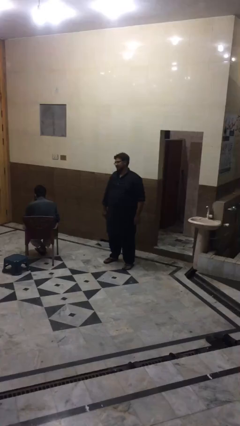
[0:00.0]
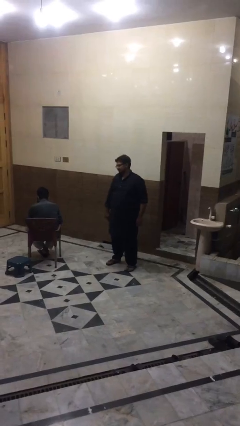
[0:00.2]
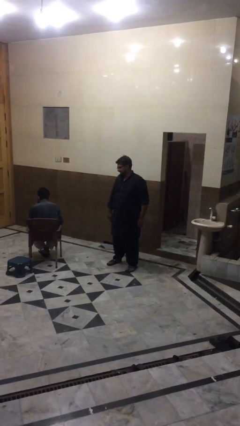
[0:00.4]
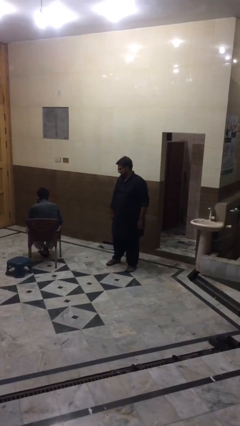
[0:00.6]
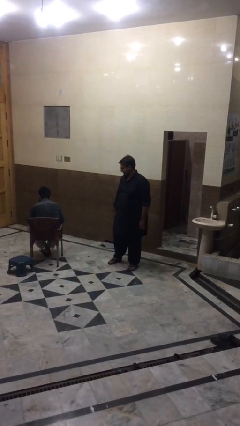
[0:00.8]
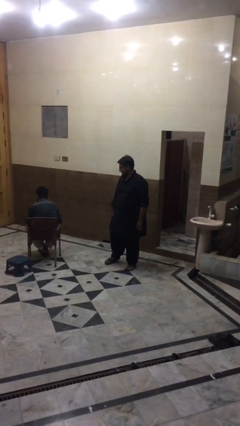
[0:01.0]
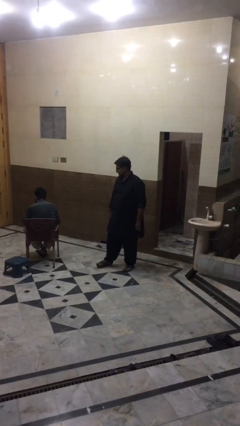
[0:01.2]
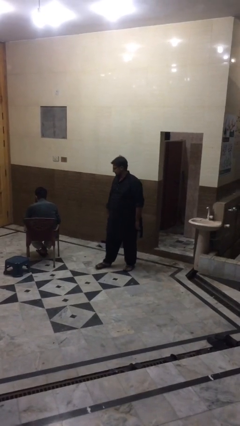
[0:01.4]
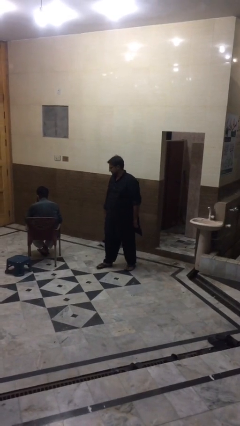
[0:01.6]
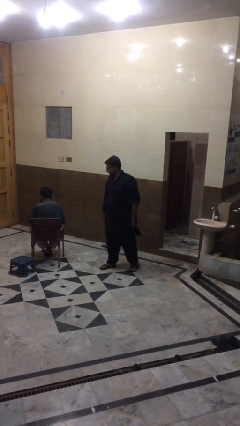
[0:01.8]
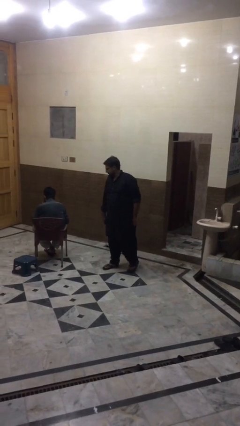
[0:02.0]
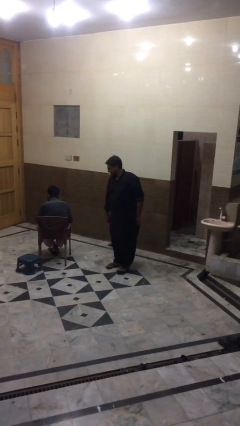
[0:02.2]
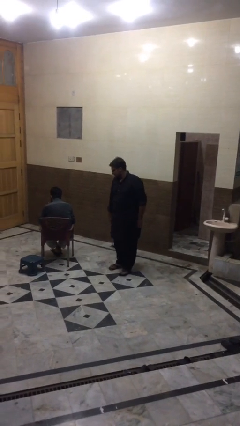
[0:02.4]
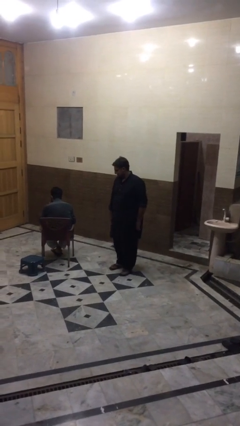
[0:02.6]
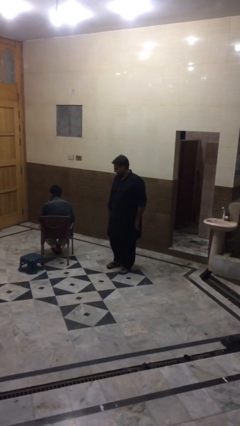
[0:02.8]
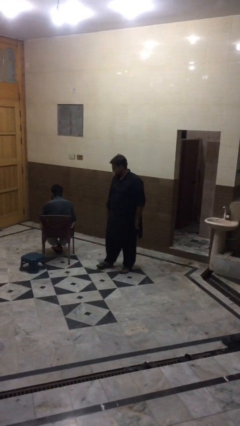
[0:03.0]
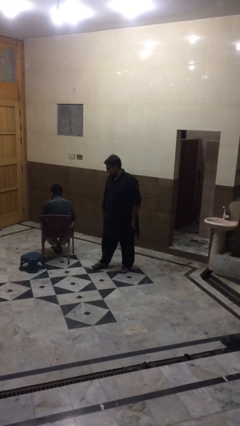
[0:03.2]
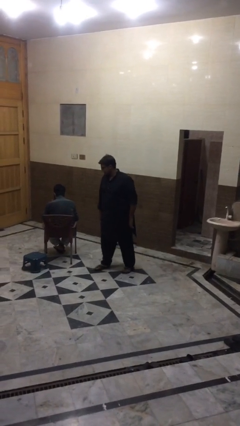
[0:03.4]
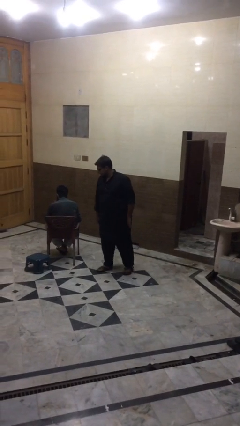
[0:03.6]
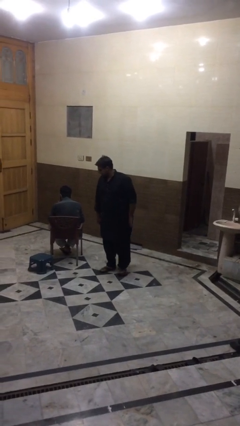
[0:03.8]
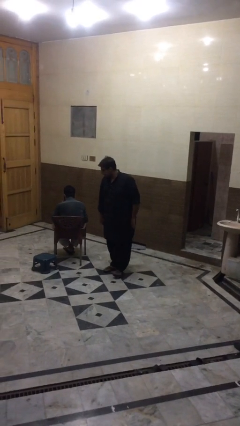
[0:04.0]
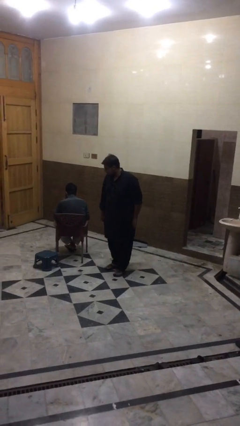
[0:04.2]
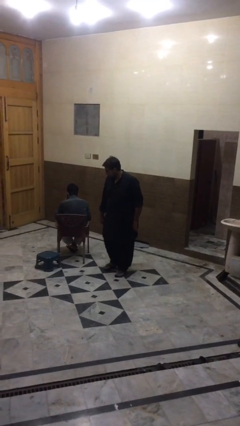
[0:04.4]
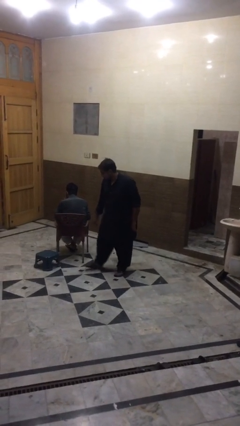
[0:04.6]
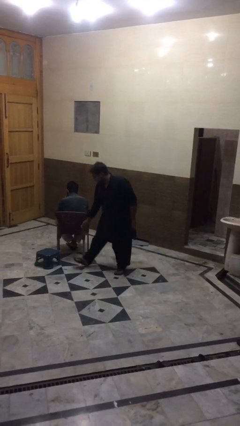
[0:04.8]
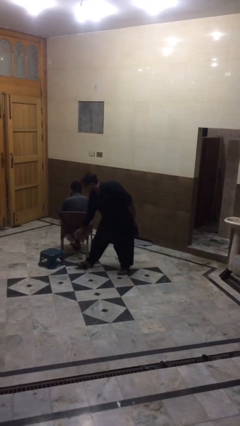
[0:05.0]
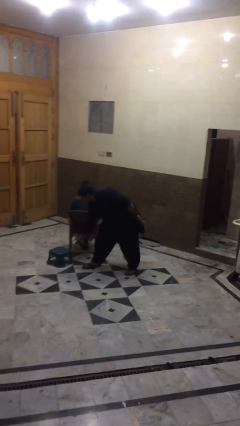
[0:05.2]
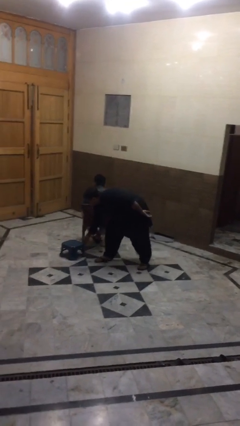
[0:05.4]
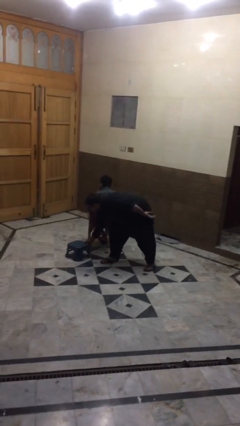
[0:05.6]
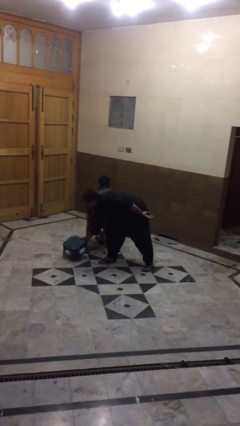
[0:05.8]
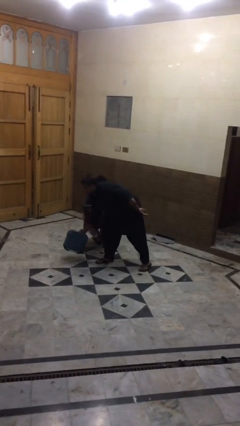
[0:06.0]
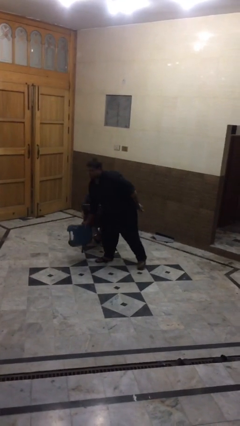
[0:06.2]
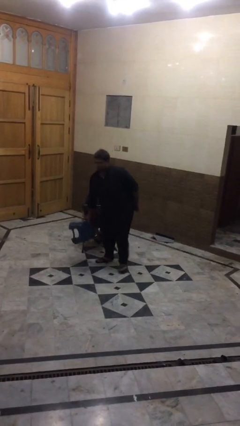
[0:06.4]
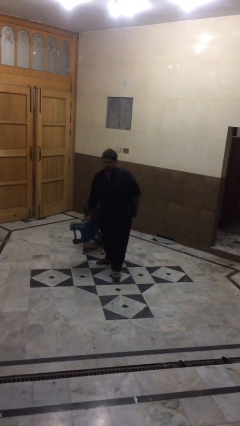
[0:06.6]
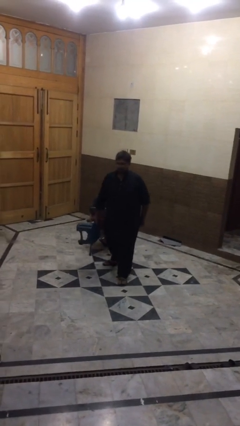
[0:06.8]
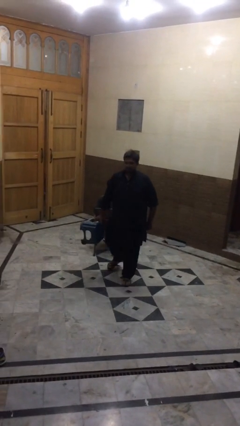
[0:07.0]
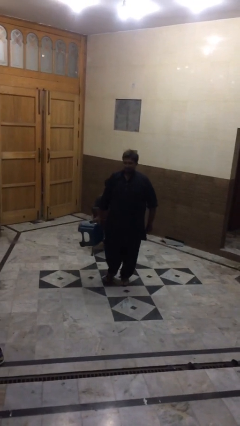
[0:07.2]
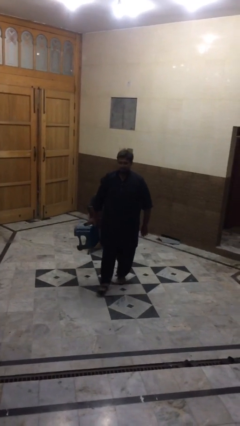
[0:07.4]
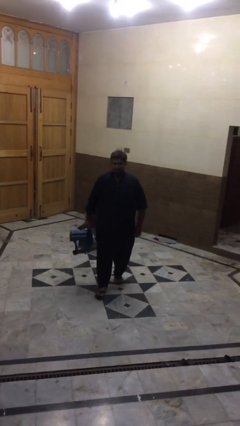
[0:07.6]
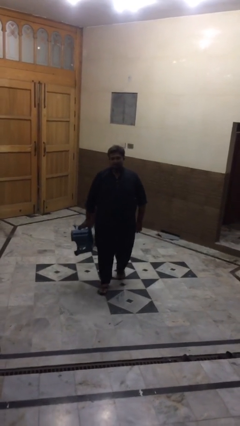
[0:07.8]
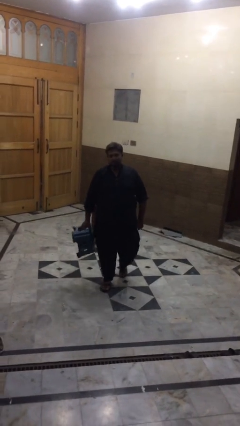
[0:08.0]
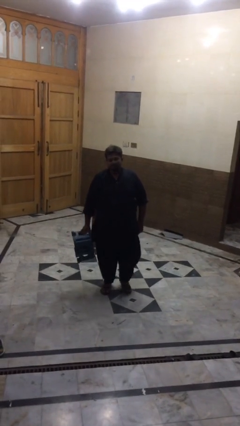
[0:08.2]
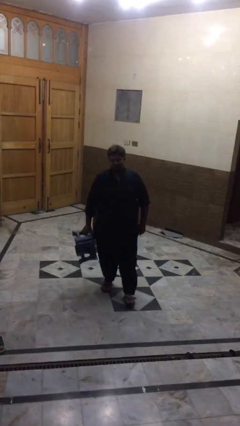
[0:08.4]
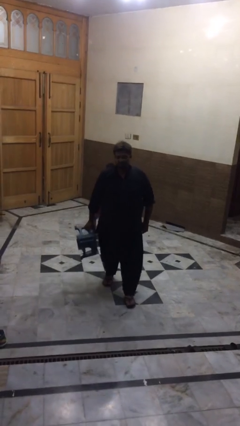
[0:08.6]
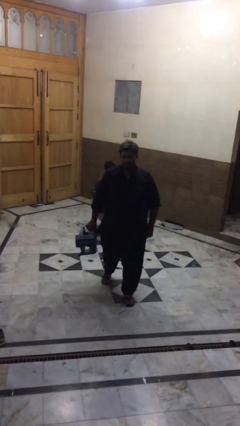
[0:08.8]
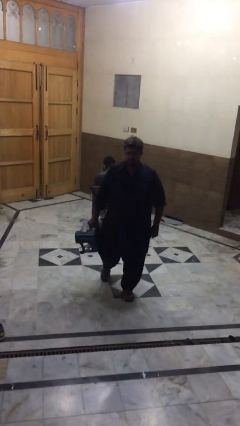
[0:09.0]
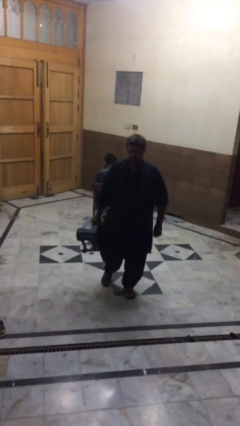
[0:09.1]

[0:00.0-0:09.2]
person steals object from person

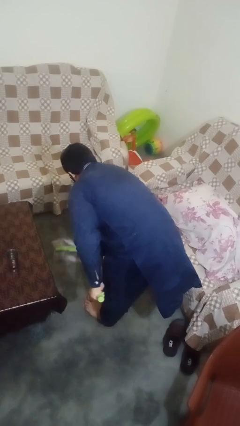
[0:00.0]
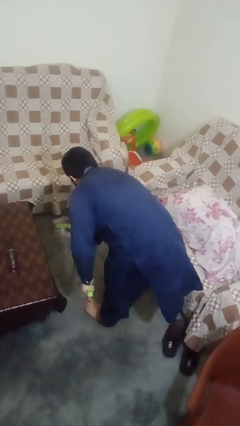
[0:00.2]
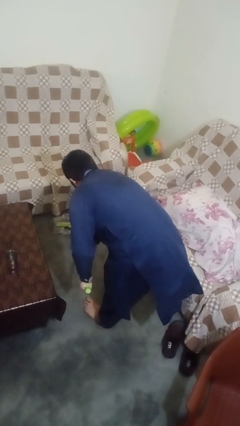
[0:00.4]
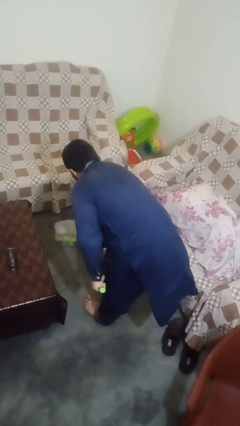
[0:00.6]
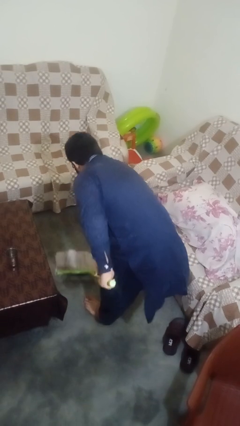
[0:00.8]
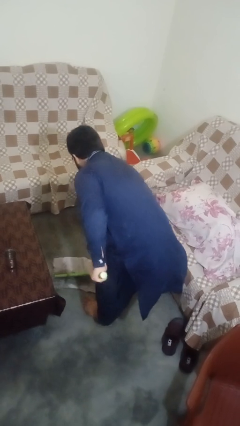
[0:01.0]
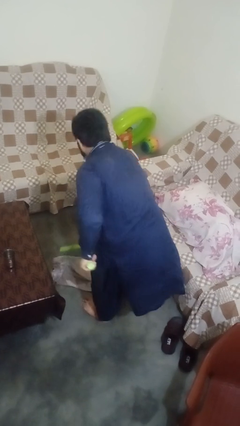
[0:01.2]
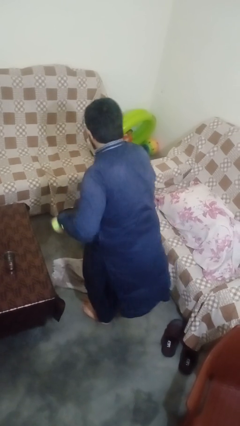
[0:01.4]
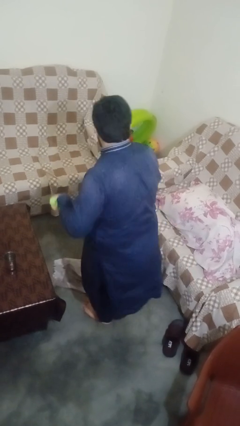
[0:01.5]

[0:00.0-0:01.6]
person mops

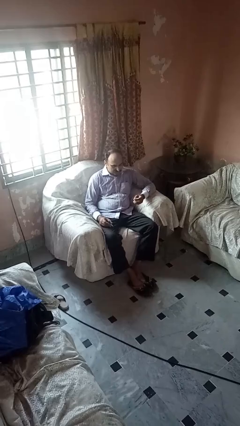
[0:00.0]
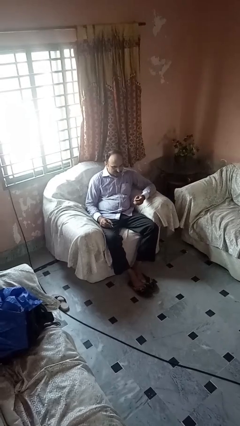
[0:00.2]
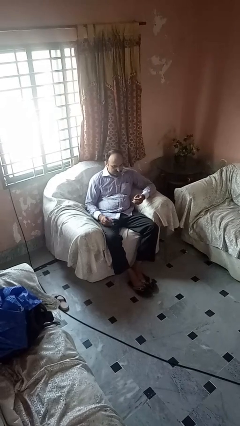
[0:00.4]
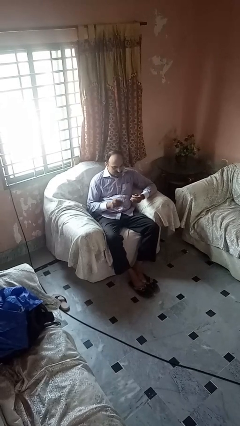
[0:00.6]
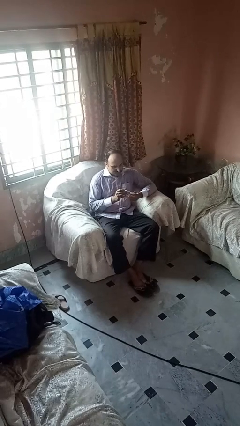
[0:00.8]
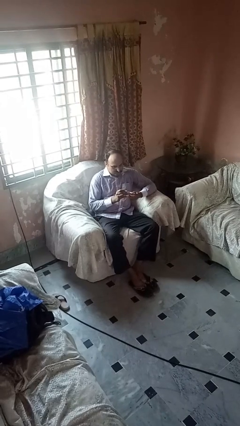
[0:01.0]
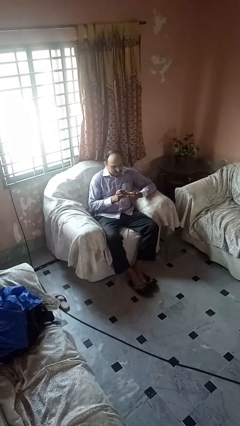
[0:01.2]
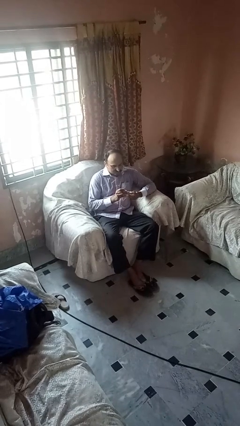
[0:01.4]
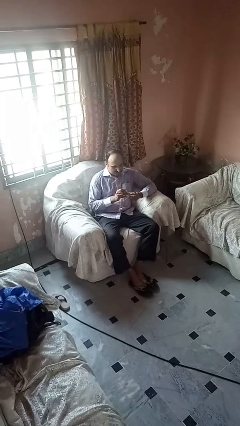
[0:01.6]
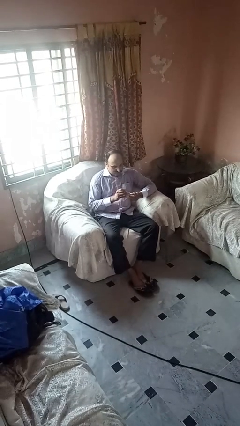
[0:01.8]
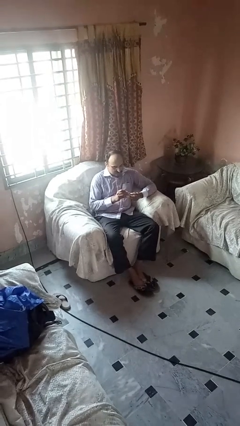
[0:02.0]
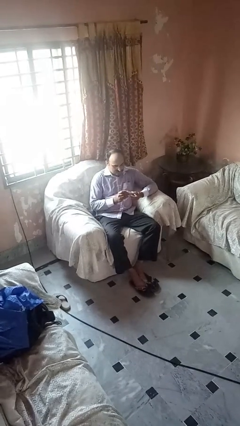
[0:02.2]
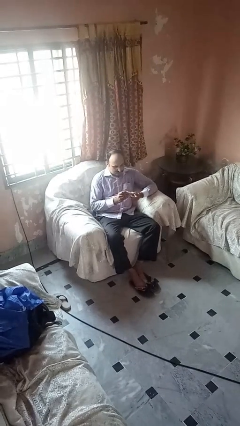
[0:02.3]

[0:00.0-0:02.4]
person clips fingernails

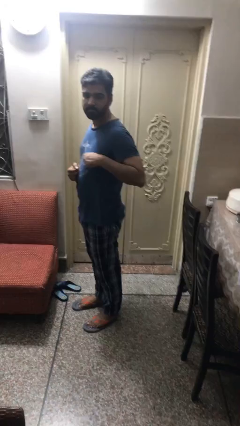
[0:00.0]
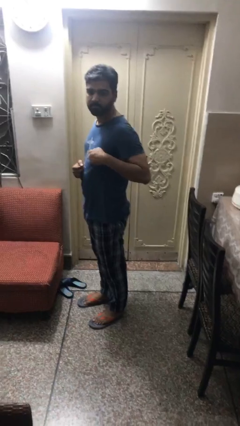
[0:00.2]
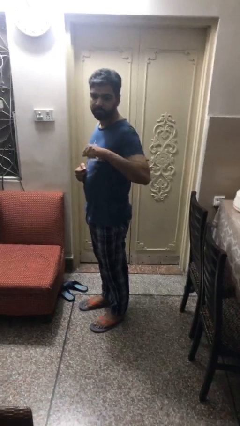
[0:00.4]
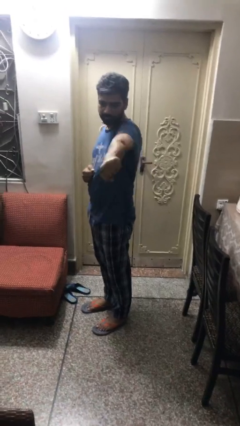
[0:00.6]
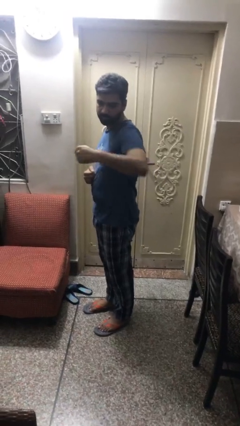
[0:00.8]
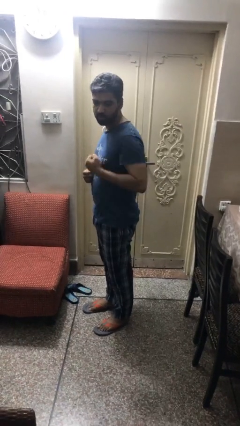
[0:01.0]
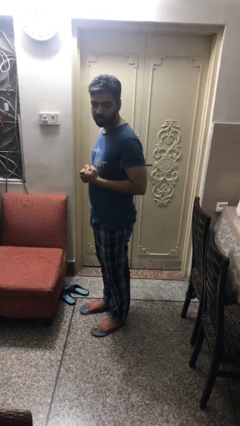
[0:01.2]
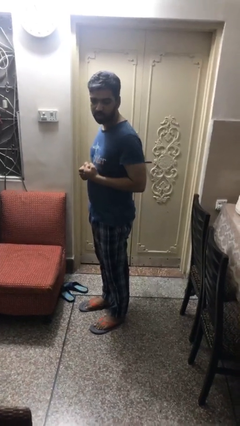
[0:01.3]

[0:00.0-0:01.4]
person karate chop

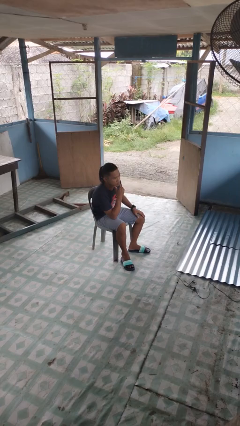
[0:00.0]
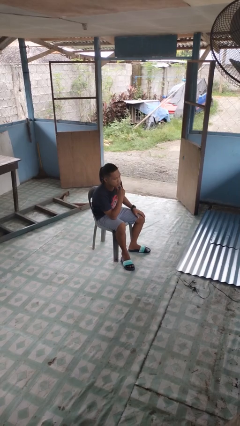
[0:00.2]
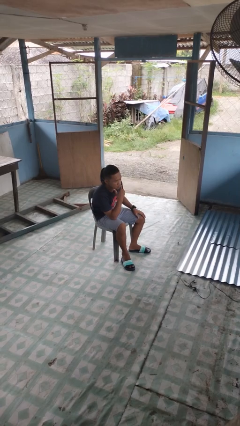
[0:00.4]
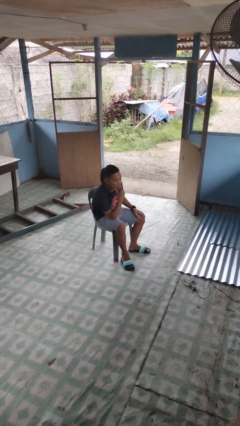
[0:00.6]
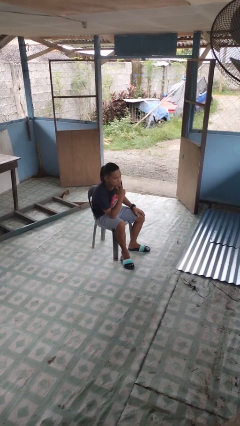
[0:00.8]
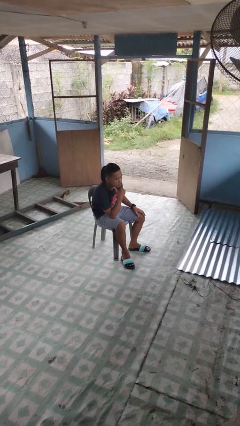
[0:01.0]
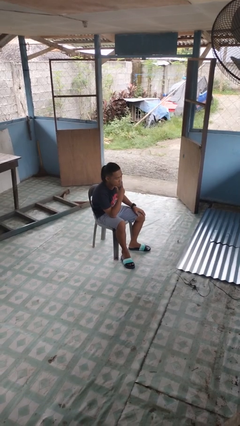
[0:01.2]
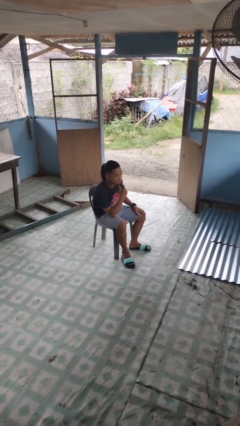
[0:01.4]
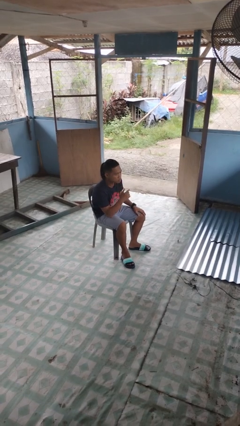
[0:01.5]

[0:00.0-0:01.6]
person strokes chin

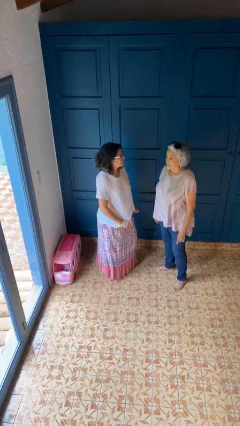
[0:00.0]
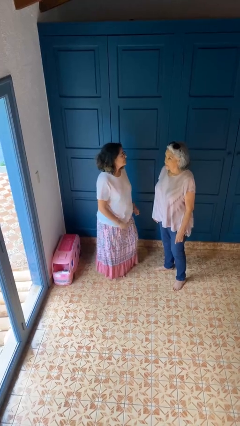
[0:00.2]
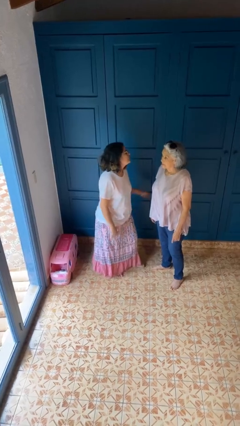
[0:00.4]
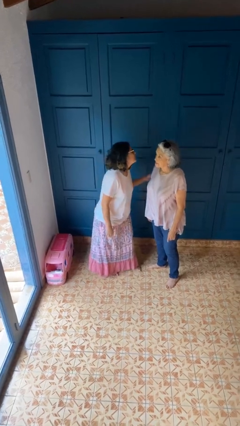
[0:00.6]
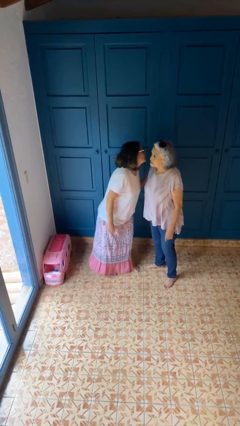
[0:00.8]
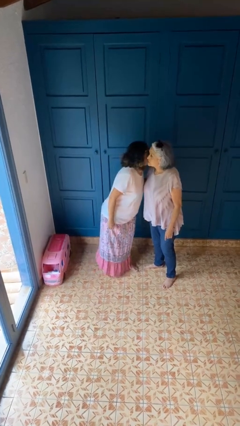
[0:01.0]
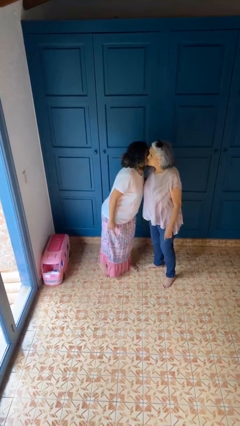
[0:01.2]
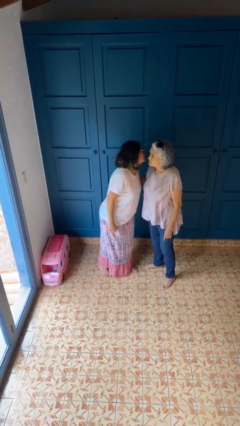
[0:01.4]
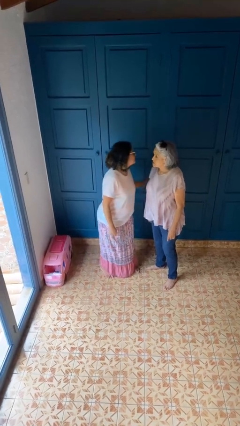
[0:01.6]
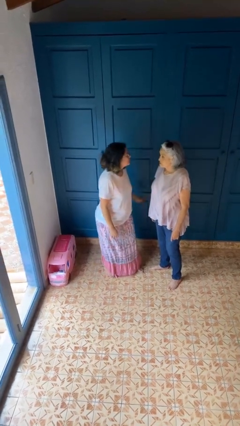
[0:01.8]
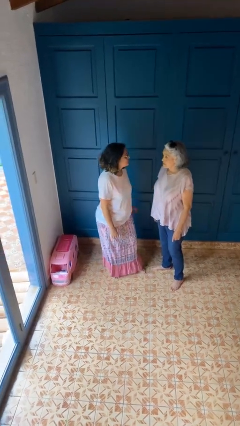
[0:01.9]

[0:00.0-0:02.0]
person kisses cheek of person
